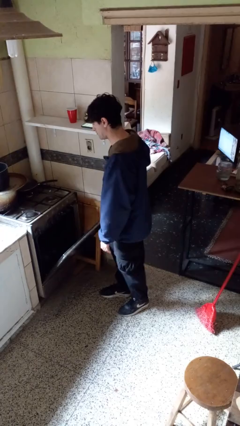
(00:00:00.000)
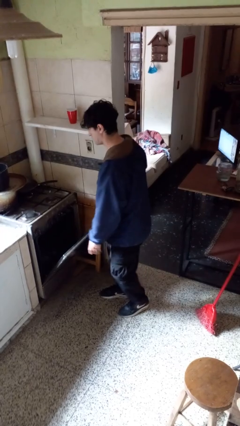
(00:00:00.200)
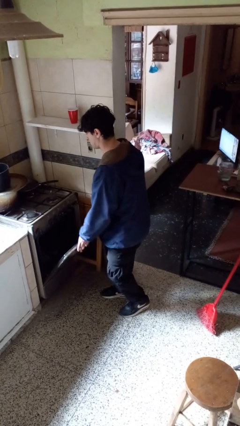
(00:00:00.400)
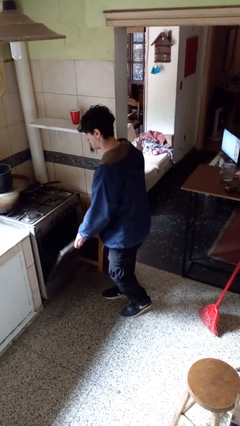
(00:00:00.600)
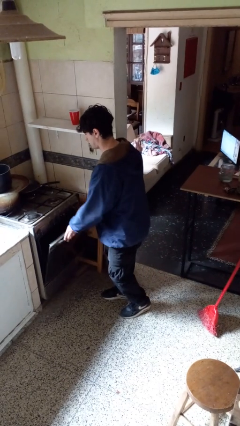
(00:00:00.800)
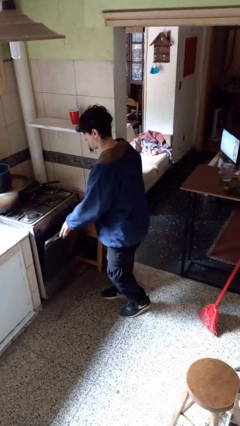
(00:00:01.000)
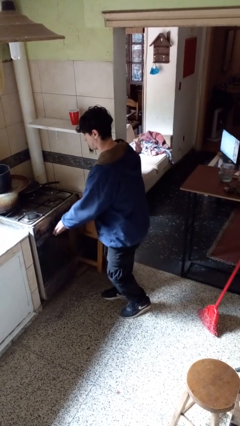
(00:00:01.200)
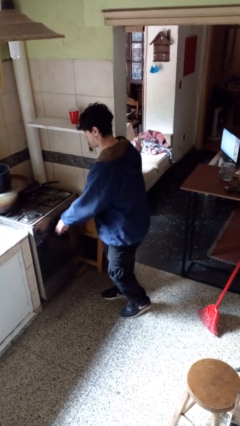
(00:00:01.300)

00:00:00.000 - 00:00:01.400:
person closes oven door

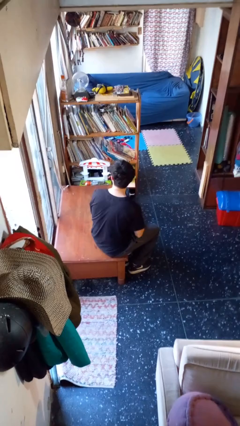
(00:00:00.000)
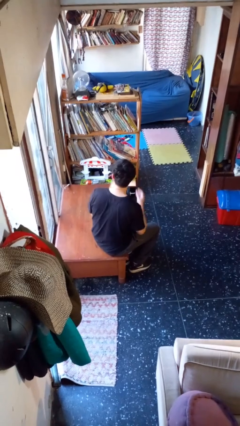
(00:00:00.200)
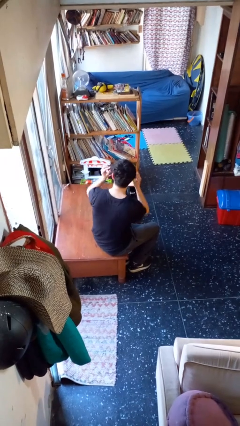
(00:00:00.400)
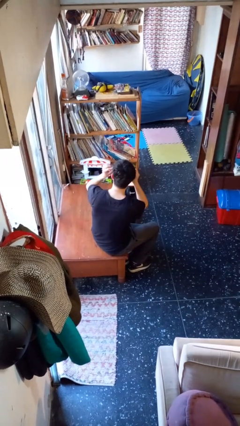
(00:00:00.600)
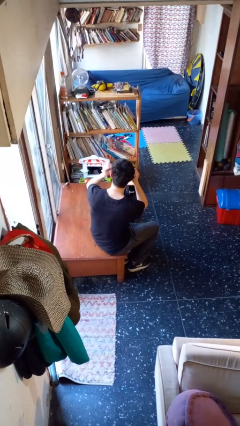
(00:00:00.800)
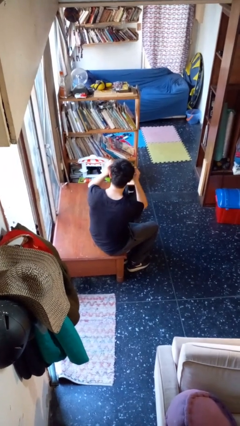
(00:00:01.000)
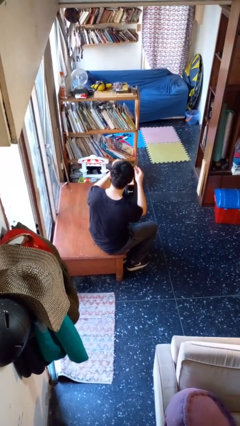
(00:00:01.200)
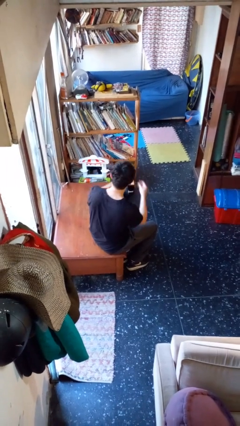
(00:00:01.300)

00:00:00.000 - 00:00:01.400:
person takes off glasses

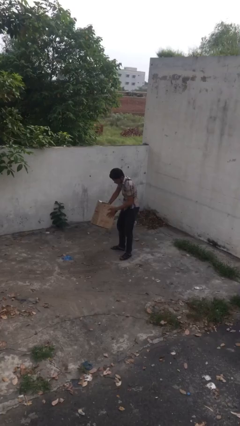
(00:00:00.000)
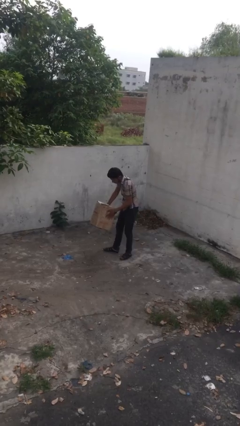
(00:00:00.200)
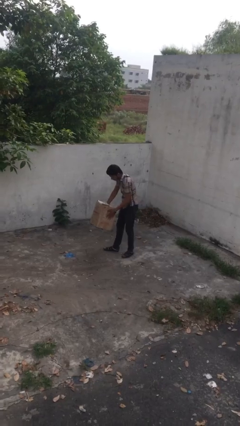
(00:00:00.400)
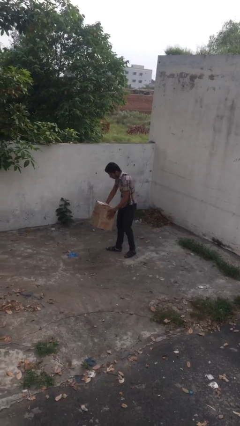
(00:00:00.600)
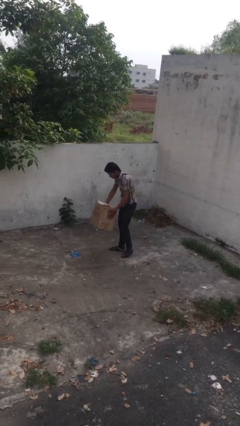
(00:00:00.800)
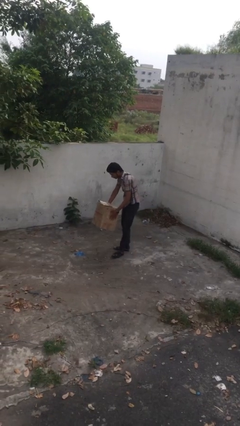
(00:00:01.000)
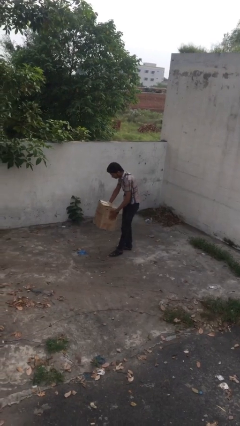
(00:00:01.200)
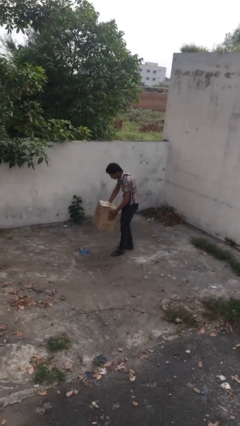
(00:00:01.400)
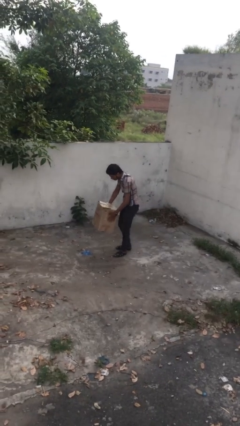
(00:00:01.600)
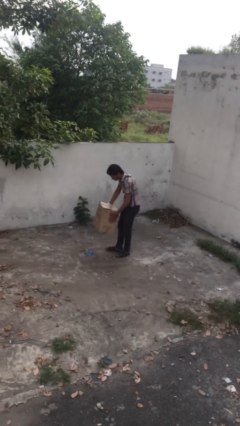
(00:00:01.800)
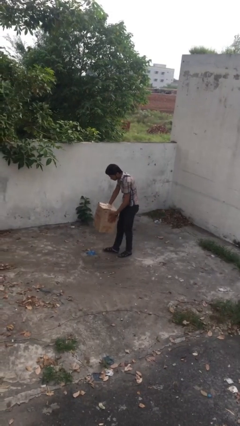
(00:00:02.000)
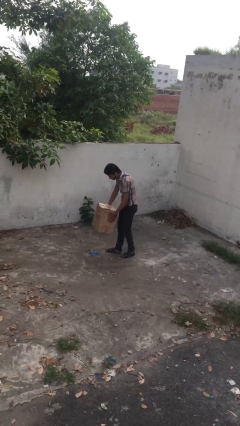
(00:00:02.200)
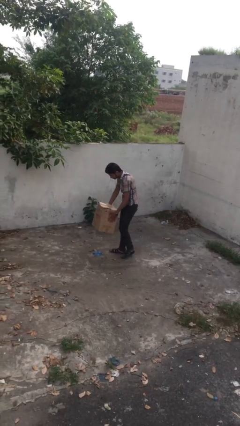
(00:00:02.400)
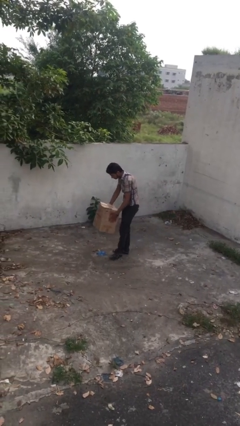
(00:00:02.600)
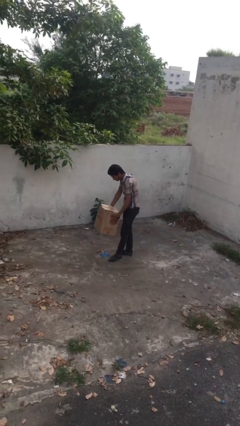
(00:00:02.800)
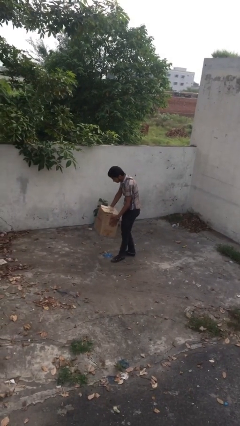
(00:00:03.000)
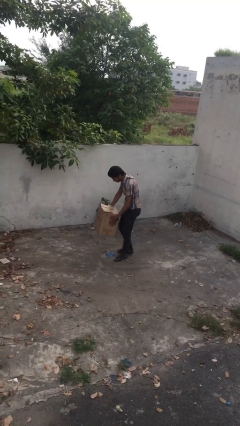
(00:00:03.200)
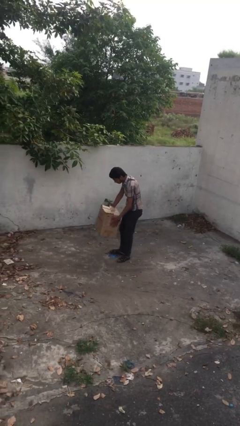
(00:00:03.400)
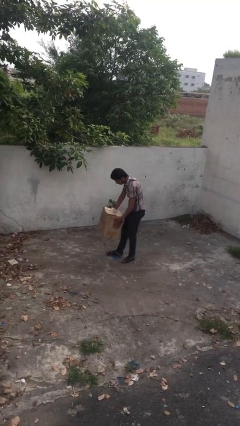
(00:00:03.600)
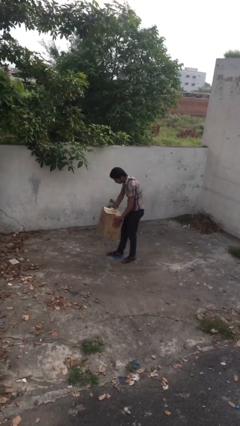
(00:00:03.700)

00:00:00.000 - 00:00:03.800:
person carries heavy object

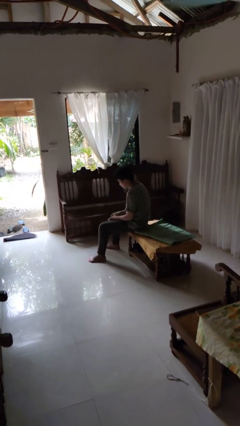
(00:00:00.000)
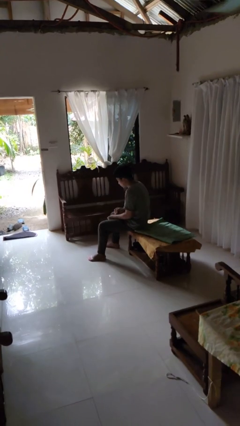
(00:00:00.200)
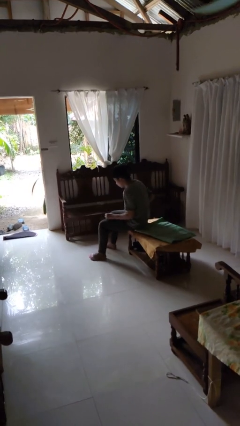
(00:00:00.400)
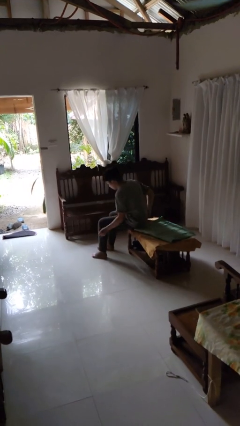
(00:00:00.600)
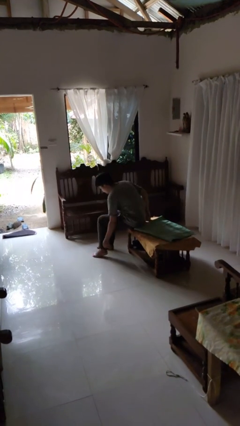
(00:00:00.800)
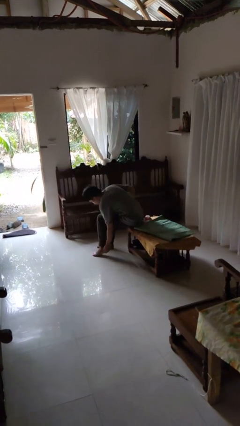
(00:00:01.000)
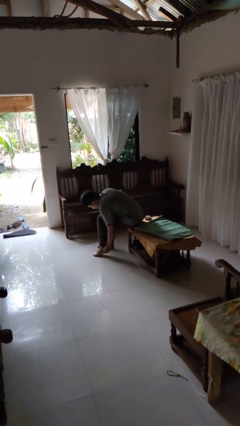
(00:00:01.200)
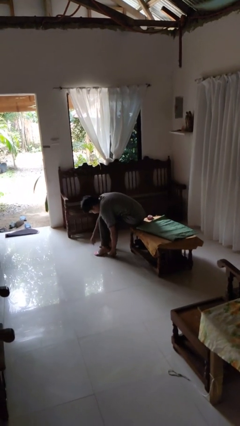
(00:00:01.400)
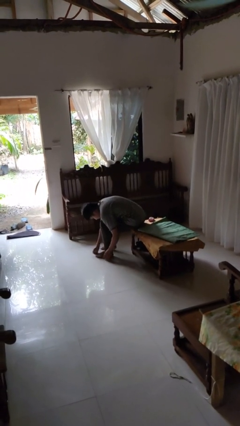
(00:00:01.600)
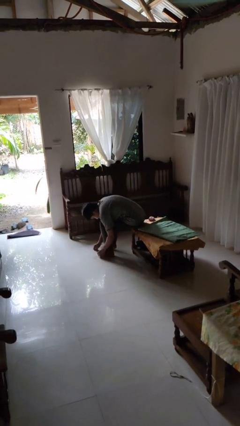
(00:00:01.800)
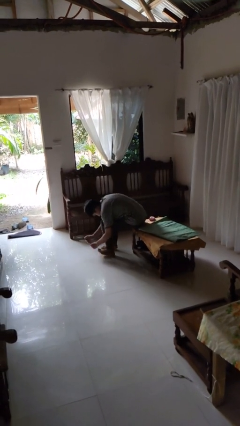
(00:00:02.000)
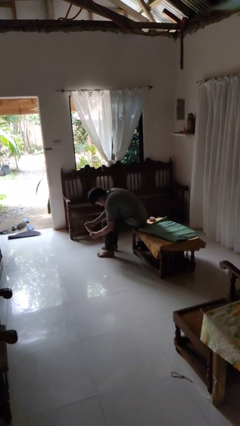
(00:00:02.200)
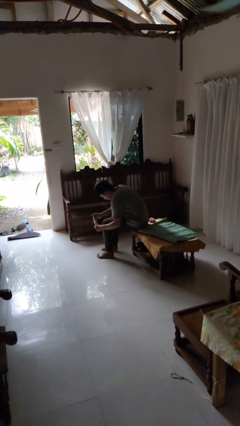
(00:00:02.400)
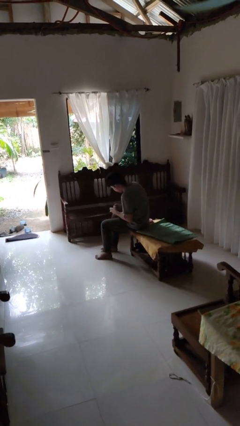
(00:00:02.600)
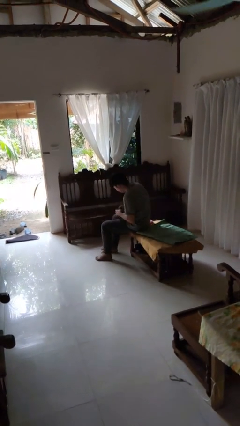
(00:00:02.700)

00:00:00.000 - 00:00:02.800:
person takes off socks

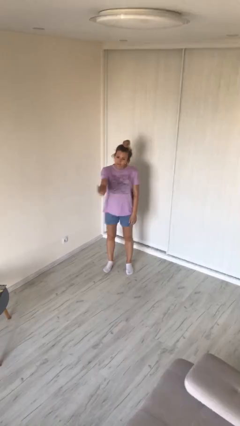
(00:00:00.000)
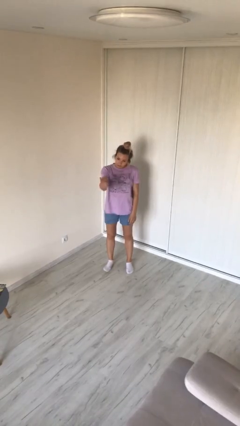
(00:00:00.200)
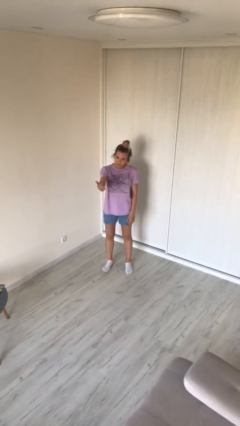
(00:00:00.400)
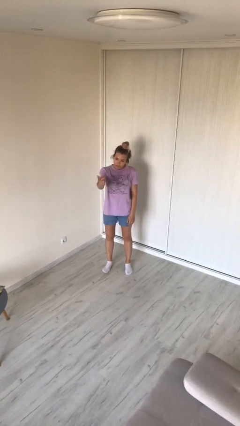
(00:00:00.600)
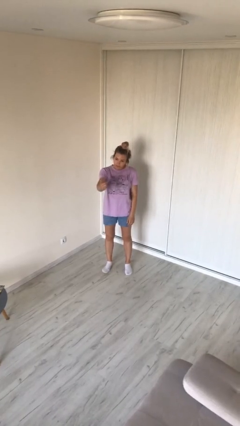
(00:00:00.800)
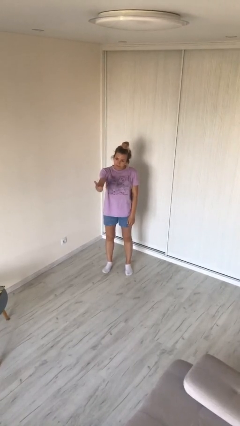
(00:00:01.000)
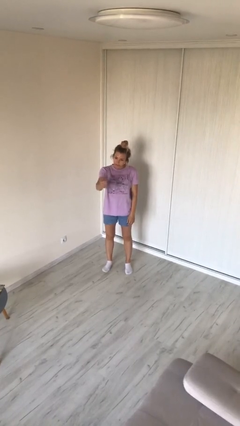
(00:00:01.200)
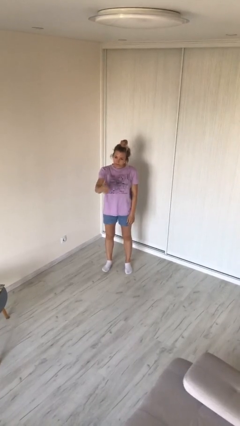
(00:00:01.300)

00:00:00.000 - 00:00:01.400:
person gestures come here

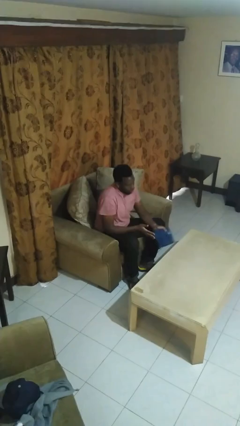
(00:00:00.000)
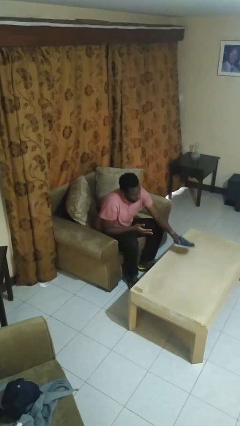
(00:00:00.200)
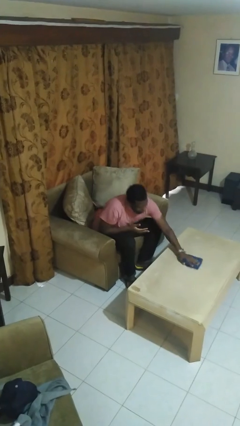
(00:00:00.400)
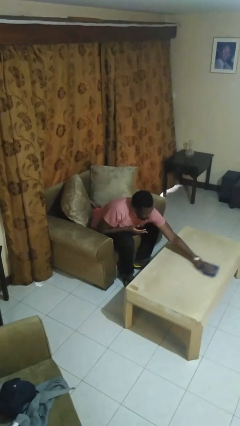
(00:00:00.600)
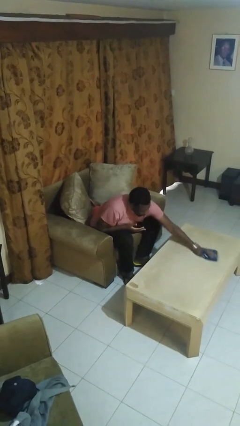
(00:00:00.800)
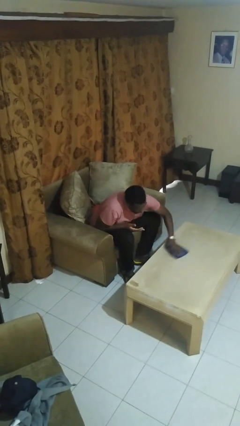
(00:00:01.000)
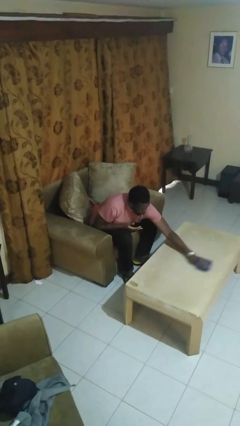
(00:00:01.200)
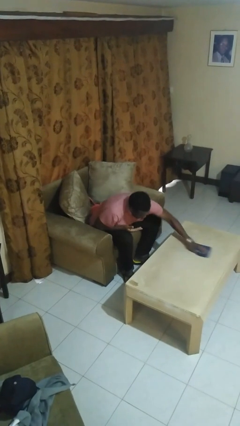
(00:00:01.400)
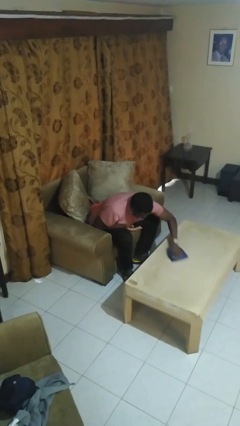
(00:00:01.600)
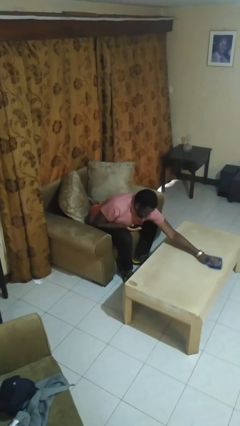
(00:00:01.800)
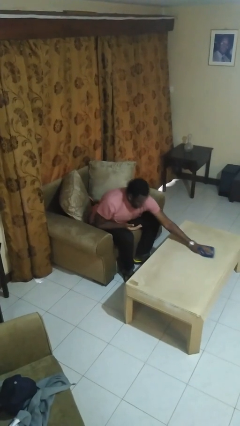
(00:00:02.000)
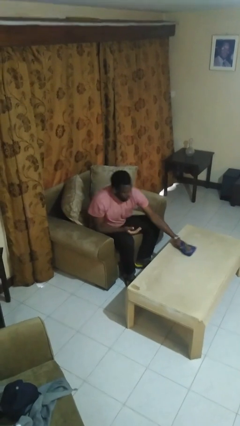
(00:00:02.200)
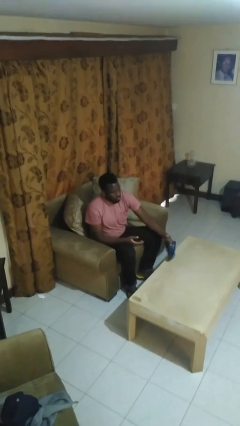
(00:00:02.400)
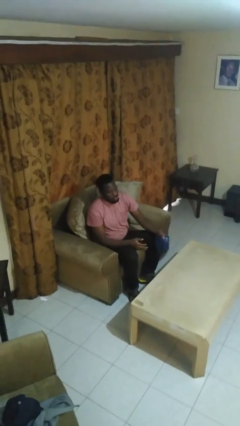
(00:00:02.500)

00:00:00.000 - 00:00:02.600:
person cleans table with rag

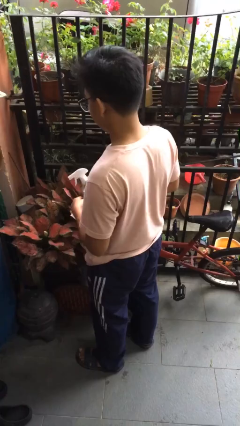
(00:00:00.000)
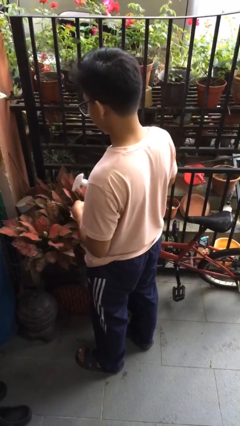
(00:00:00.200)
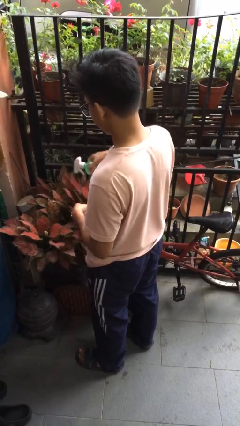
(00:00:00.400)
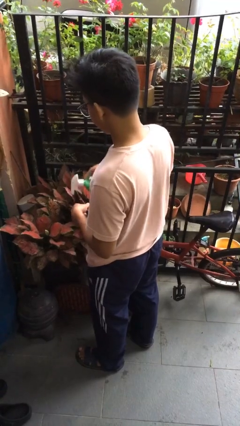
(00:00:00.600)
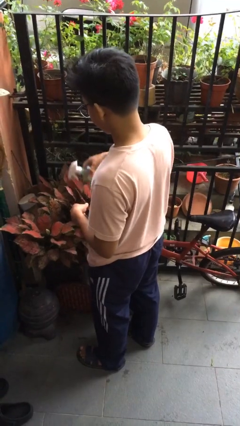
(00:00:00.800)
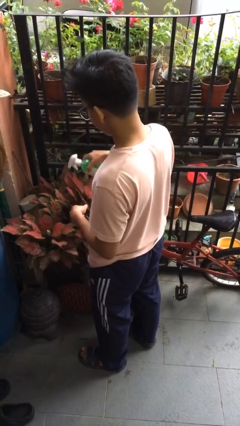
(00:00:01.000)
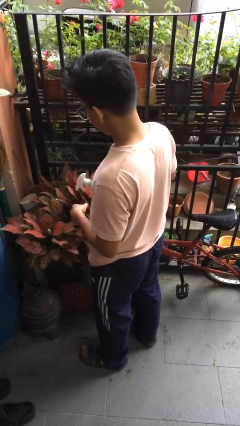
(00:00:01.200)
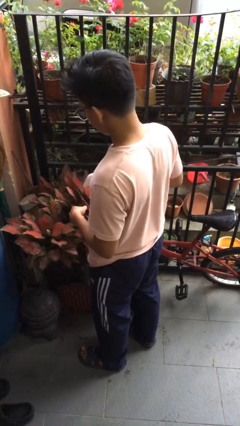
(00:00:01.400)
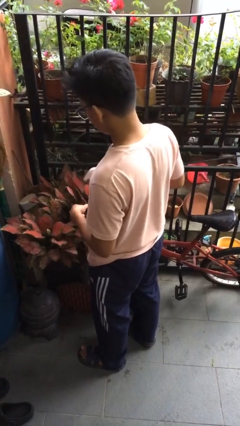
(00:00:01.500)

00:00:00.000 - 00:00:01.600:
person waters houseplant

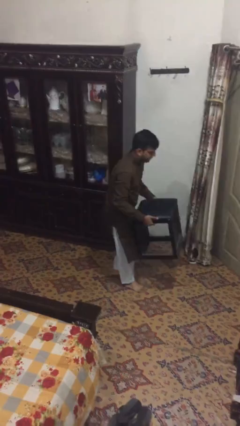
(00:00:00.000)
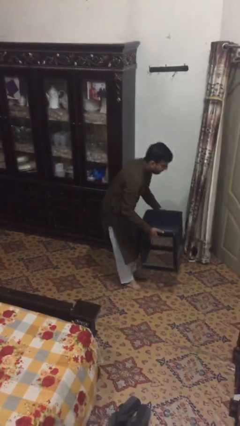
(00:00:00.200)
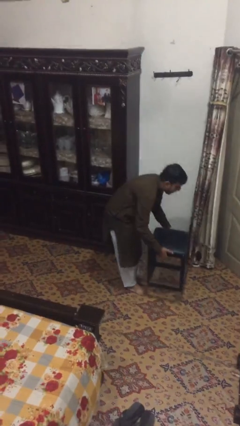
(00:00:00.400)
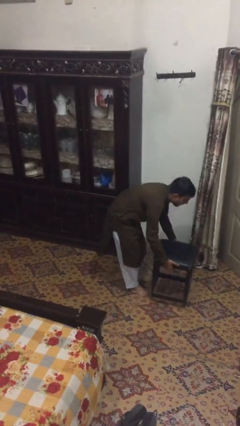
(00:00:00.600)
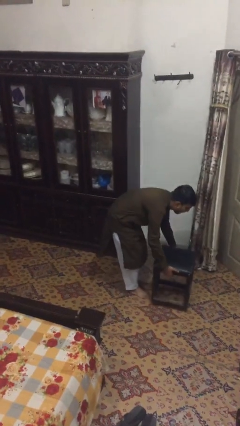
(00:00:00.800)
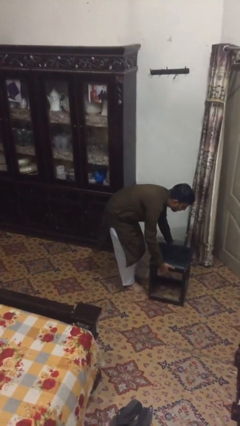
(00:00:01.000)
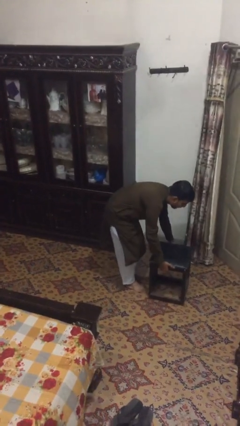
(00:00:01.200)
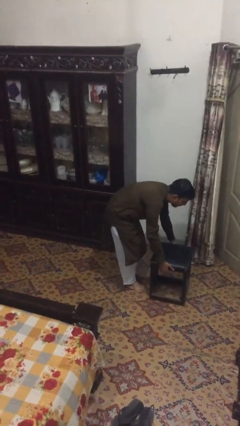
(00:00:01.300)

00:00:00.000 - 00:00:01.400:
person puts down object on floor
